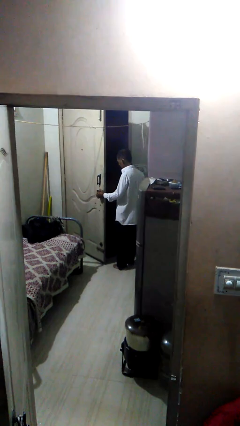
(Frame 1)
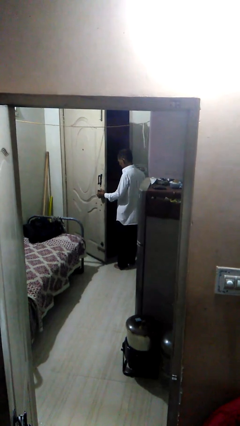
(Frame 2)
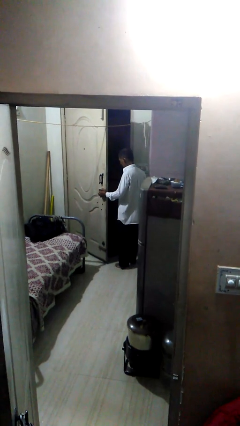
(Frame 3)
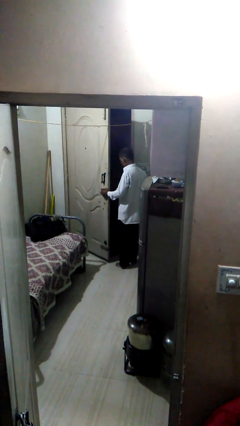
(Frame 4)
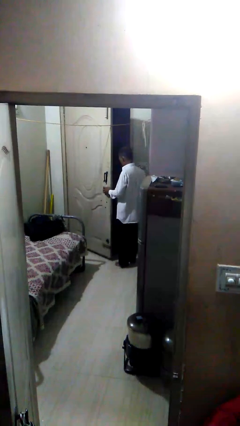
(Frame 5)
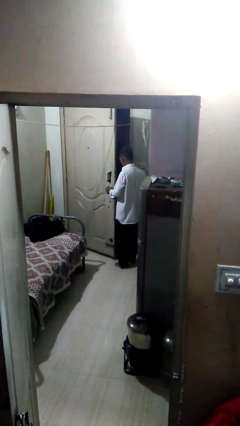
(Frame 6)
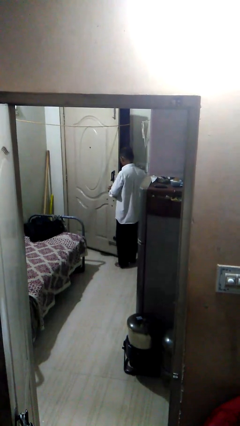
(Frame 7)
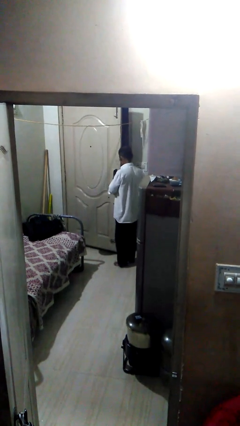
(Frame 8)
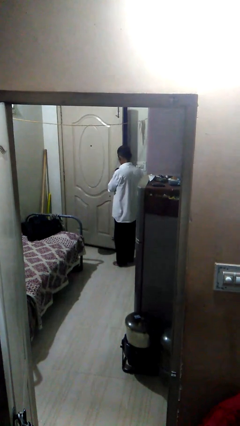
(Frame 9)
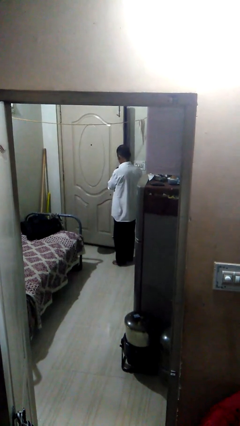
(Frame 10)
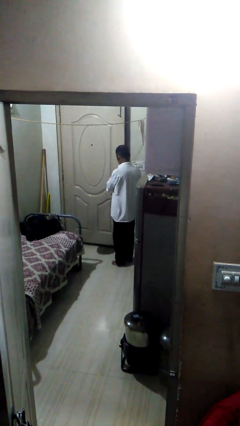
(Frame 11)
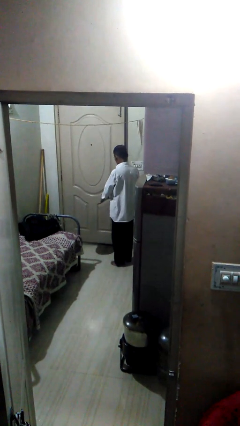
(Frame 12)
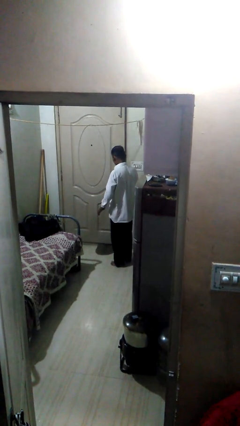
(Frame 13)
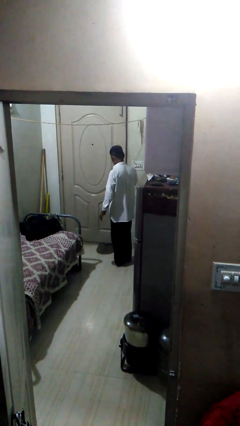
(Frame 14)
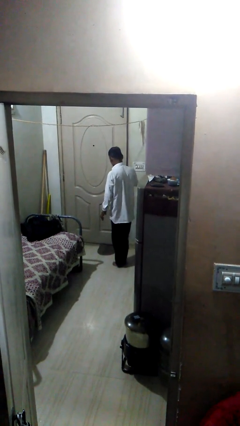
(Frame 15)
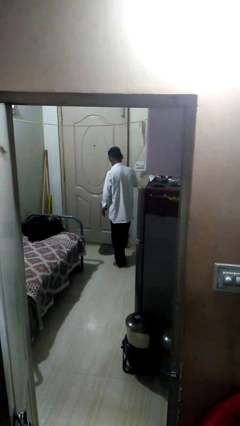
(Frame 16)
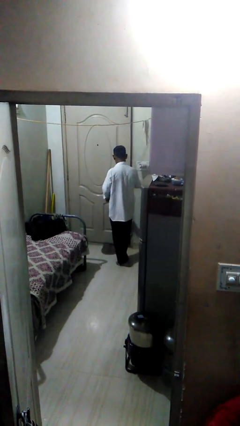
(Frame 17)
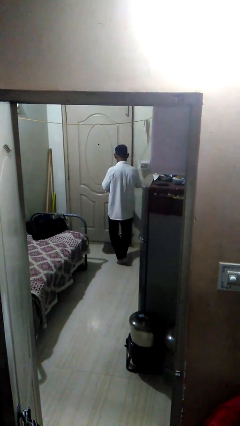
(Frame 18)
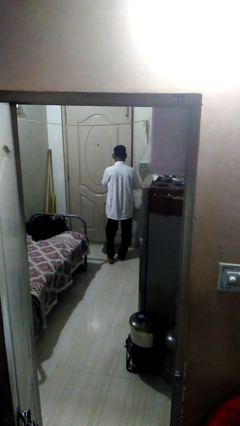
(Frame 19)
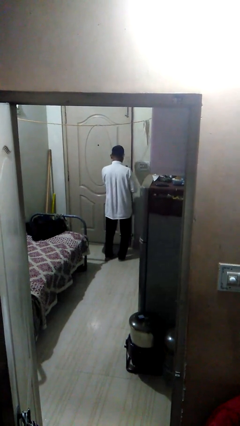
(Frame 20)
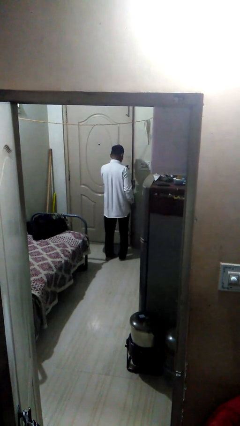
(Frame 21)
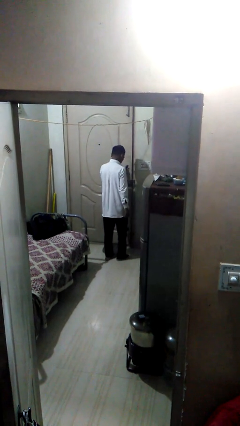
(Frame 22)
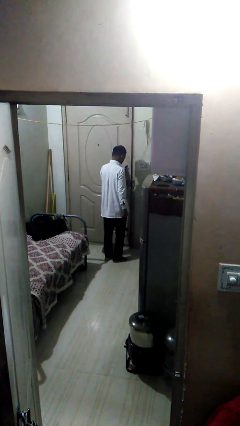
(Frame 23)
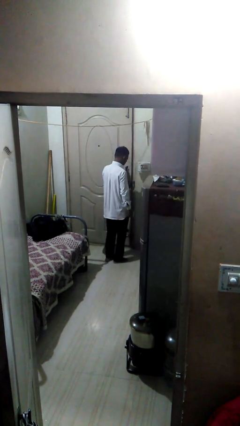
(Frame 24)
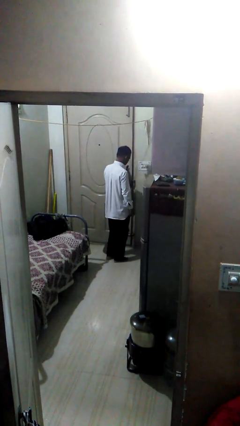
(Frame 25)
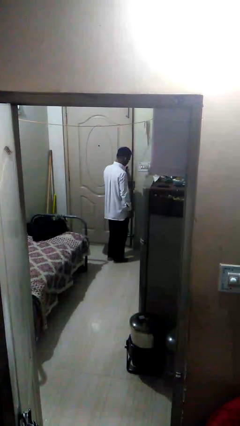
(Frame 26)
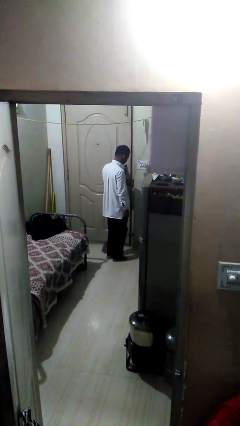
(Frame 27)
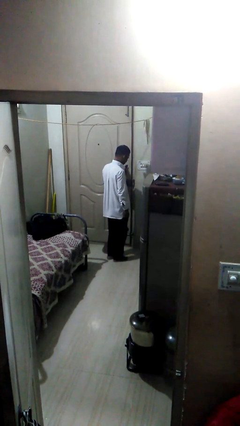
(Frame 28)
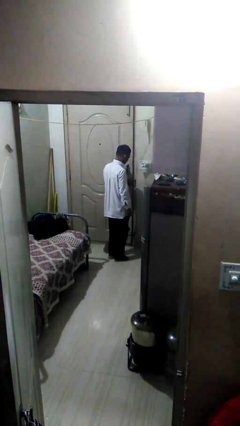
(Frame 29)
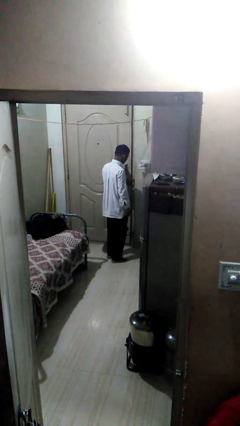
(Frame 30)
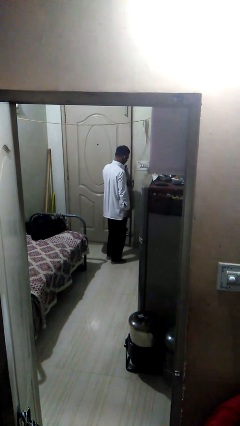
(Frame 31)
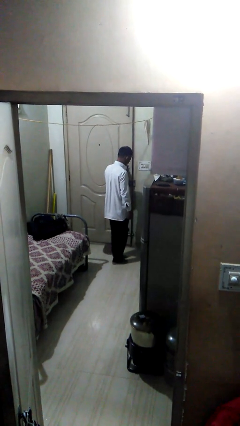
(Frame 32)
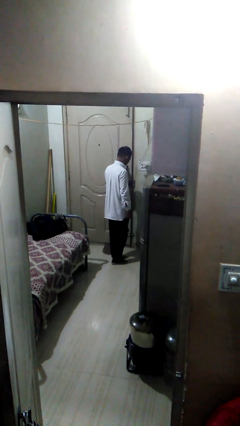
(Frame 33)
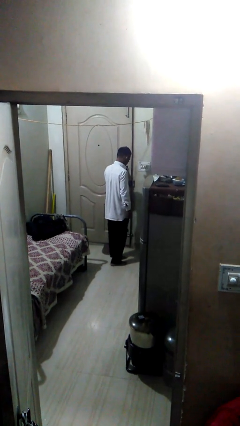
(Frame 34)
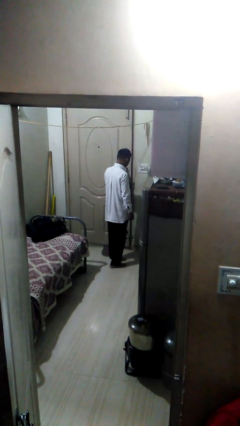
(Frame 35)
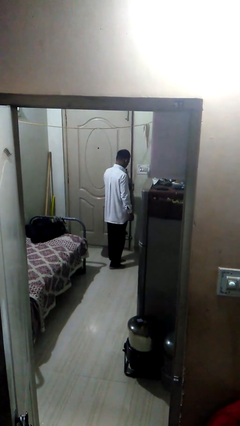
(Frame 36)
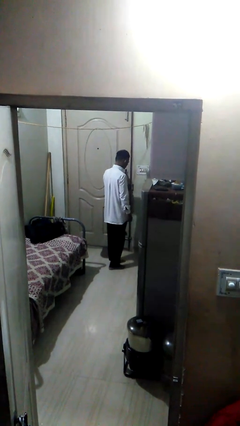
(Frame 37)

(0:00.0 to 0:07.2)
person closes facility door

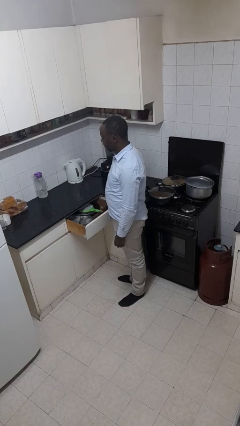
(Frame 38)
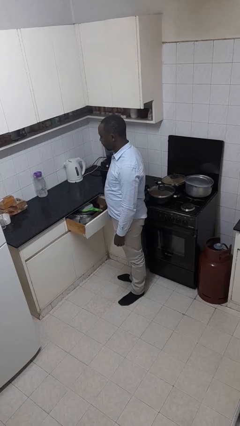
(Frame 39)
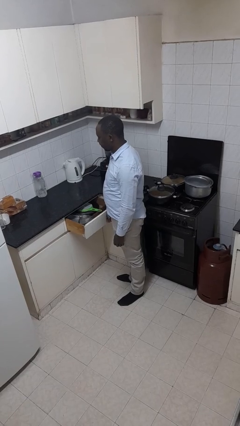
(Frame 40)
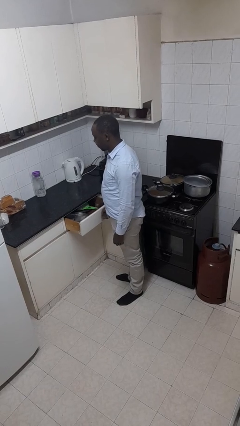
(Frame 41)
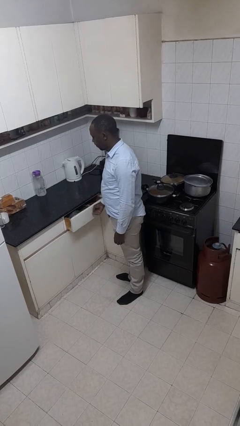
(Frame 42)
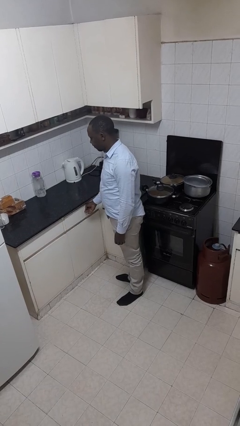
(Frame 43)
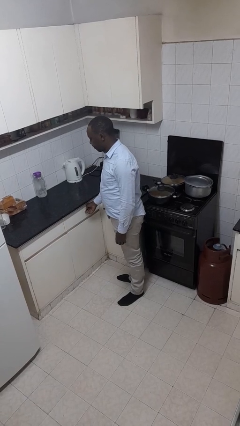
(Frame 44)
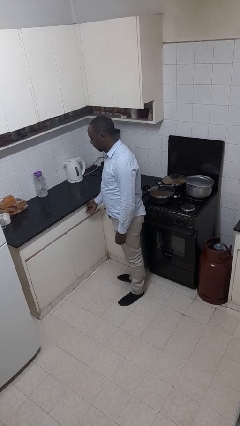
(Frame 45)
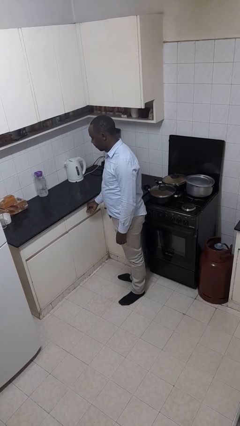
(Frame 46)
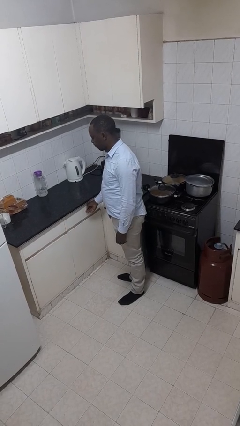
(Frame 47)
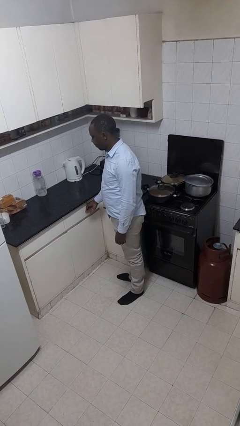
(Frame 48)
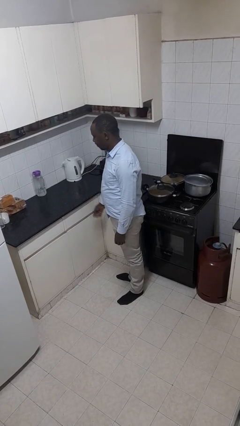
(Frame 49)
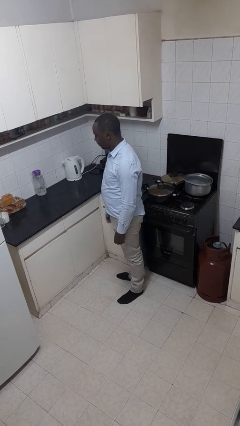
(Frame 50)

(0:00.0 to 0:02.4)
person closes kitchen drawer

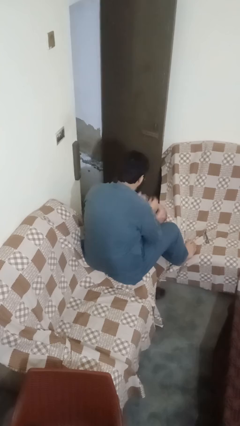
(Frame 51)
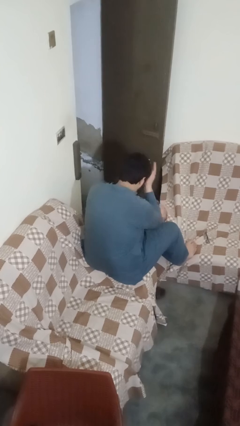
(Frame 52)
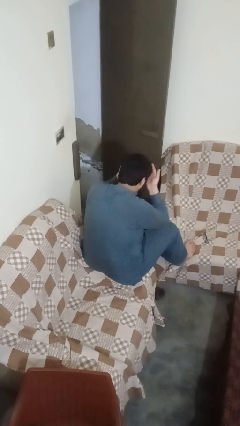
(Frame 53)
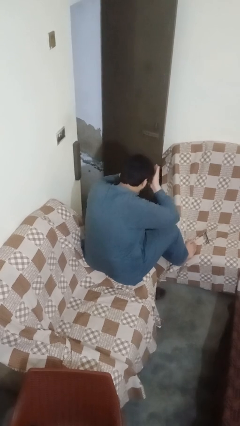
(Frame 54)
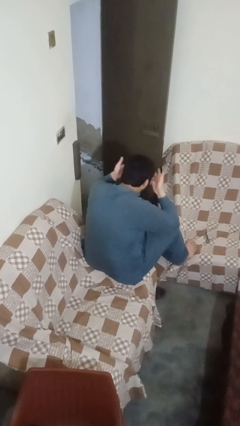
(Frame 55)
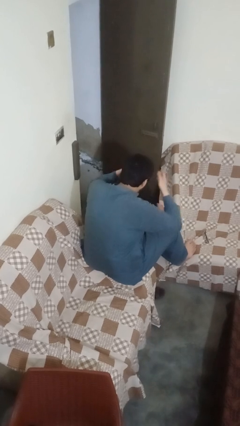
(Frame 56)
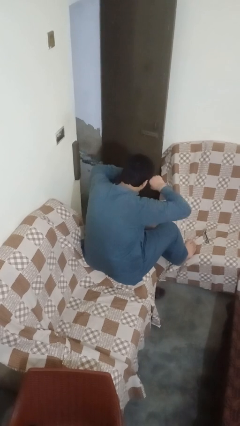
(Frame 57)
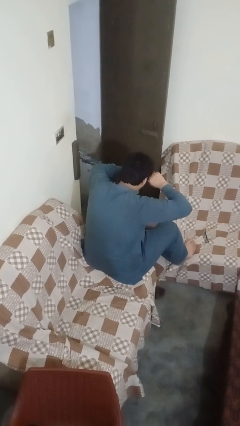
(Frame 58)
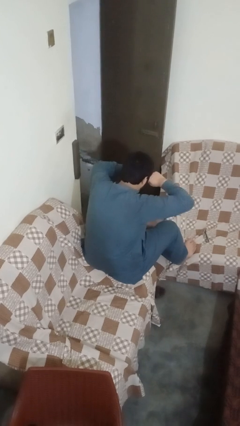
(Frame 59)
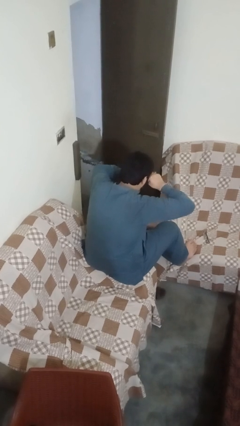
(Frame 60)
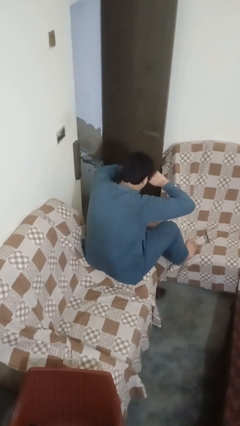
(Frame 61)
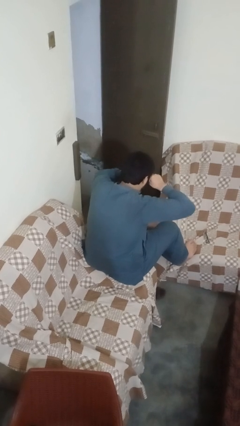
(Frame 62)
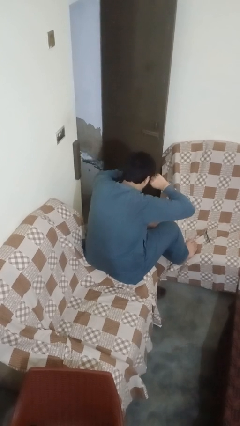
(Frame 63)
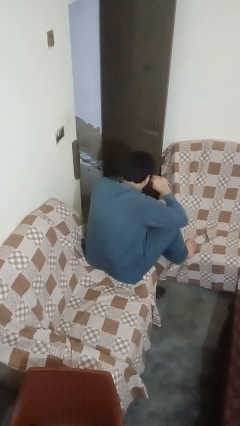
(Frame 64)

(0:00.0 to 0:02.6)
person rubs eyes

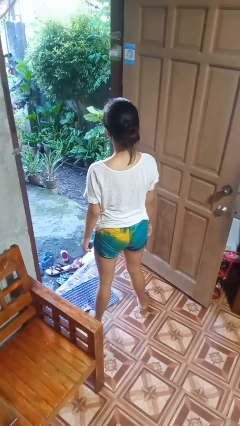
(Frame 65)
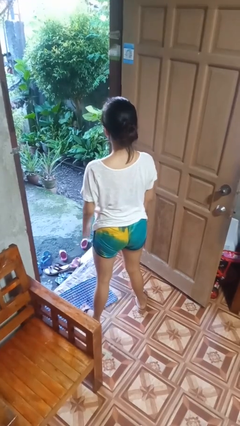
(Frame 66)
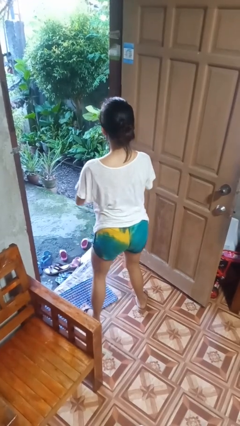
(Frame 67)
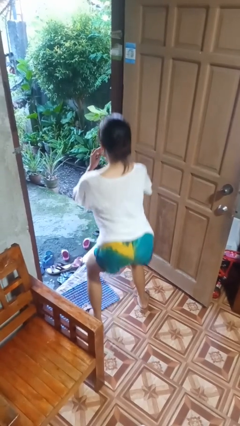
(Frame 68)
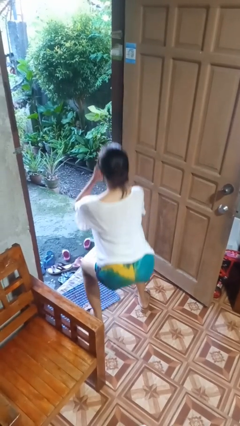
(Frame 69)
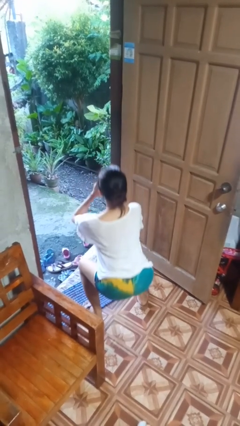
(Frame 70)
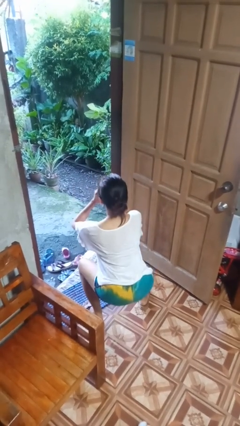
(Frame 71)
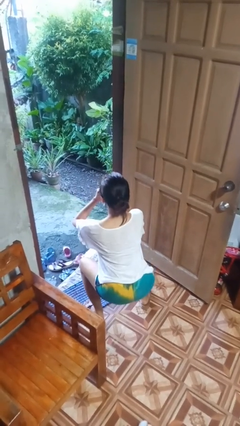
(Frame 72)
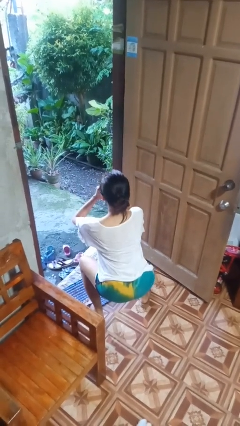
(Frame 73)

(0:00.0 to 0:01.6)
person squats

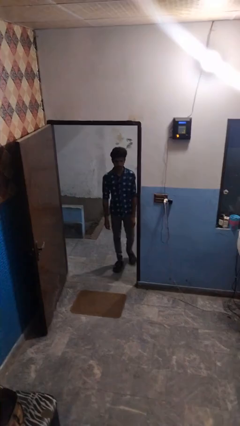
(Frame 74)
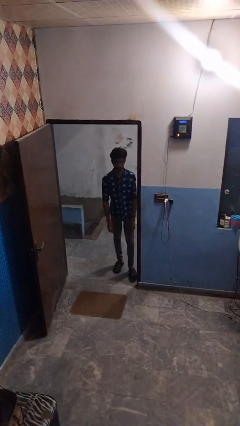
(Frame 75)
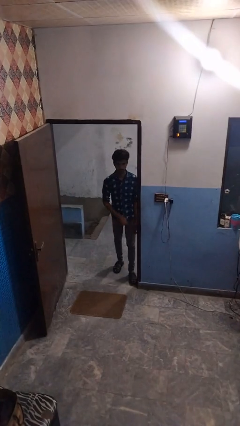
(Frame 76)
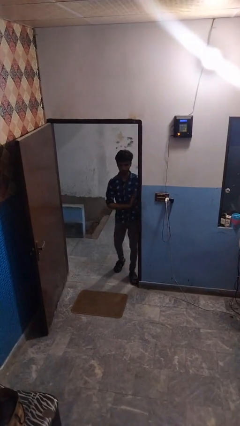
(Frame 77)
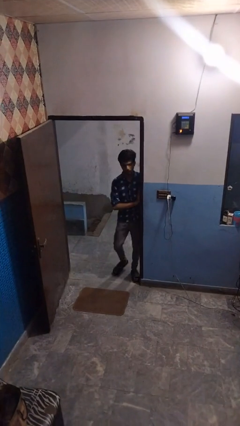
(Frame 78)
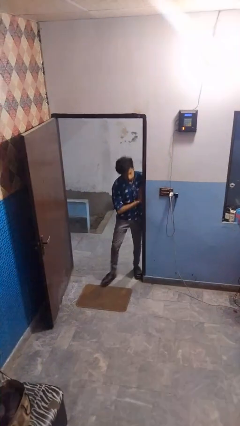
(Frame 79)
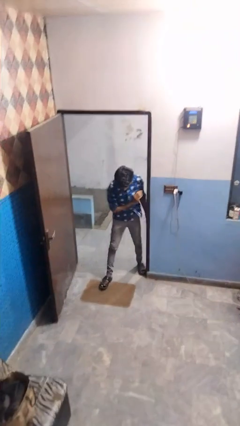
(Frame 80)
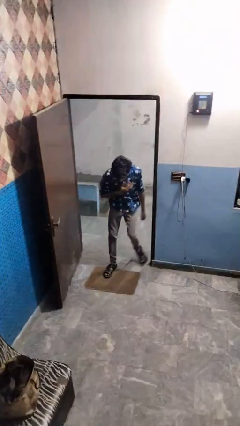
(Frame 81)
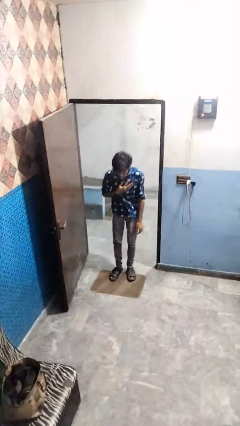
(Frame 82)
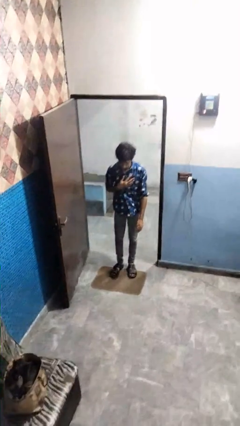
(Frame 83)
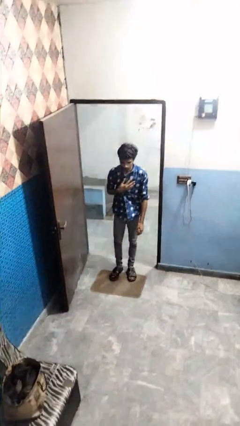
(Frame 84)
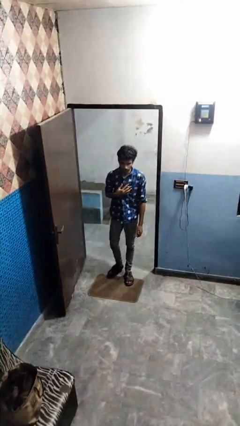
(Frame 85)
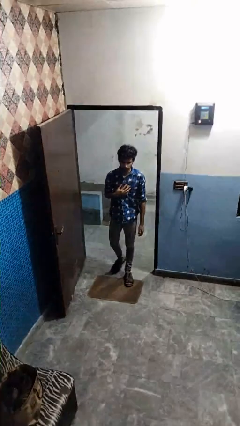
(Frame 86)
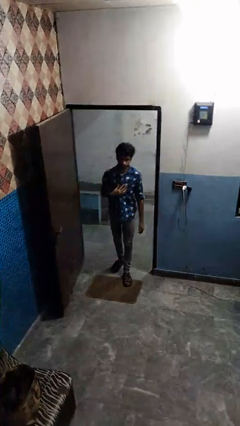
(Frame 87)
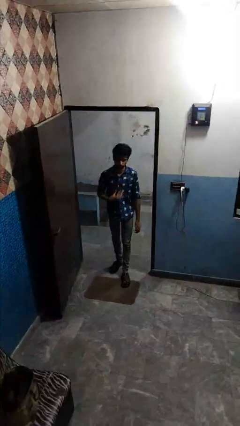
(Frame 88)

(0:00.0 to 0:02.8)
person bumps into wall

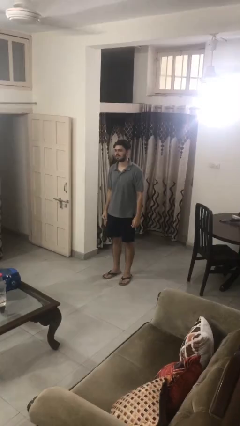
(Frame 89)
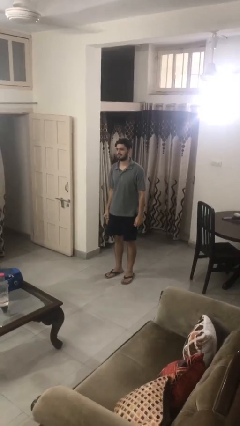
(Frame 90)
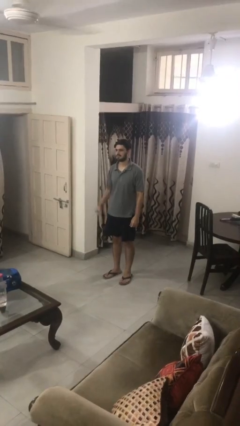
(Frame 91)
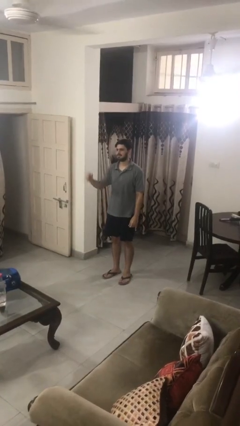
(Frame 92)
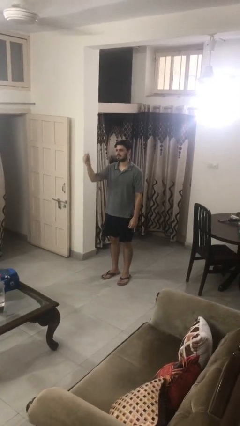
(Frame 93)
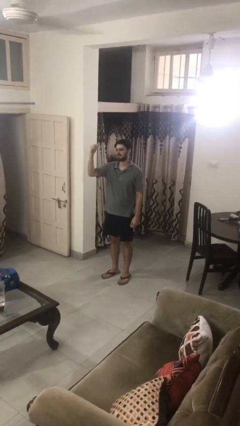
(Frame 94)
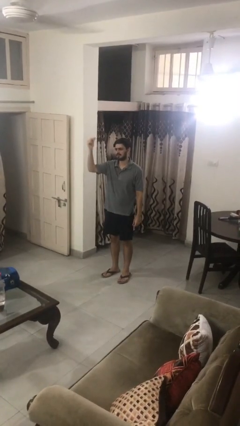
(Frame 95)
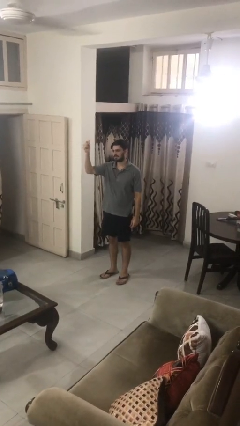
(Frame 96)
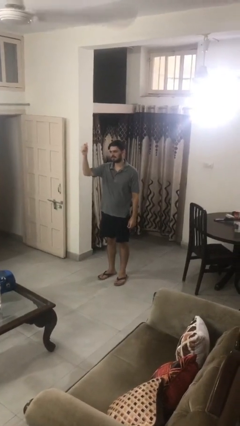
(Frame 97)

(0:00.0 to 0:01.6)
person snaps fingers
